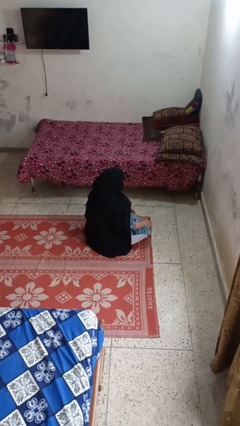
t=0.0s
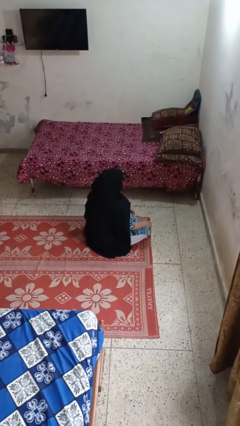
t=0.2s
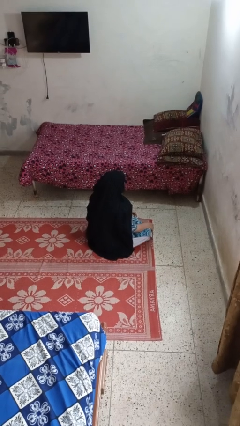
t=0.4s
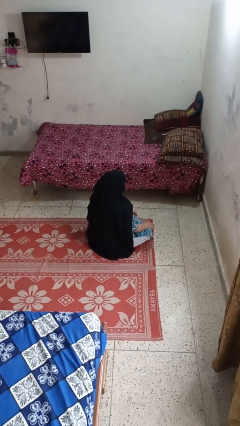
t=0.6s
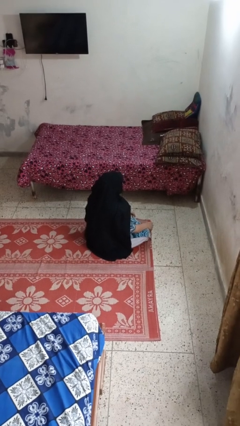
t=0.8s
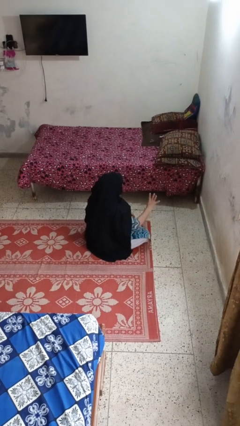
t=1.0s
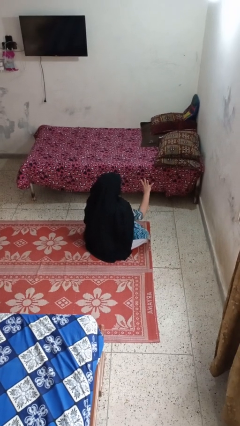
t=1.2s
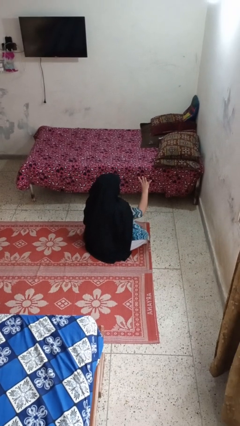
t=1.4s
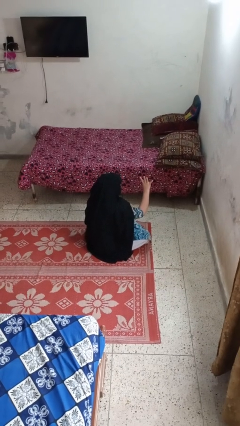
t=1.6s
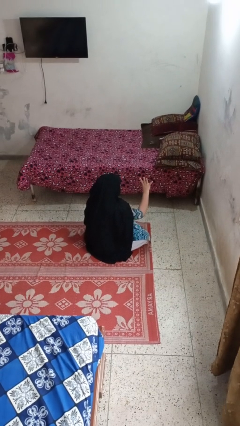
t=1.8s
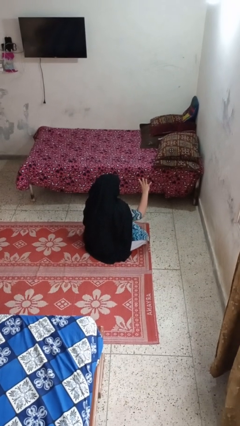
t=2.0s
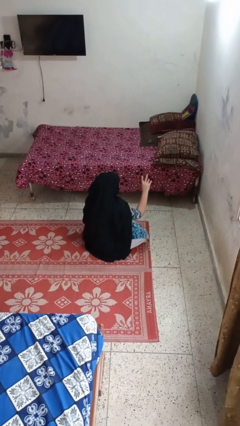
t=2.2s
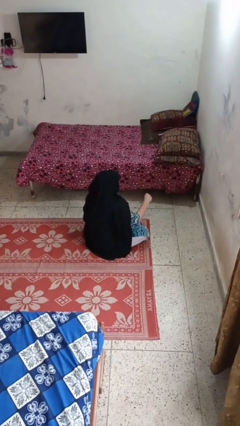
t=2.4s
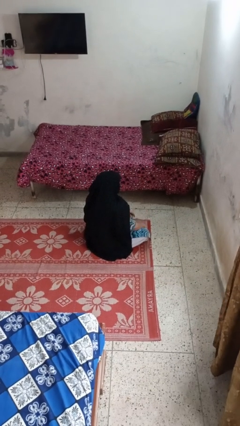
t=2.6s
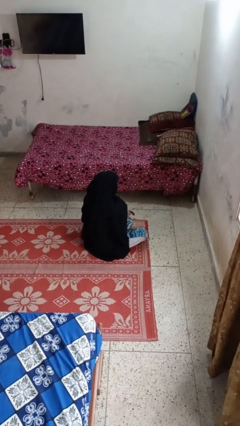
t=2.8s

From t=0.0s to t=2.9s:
person gestures number four

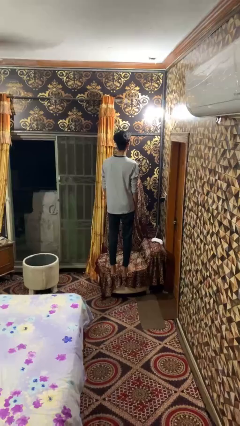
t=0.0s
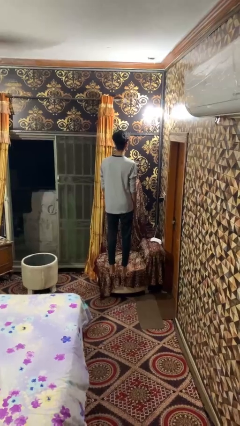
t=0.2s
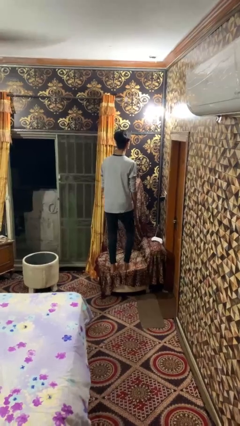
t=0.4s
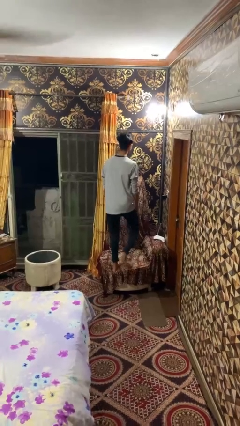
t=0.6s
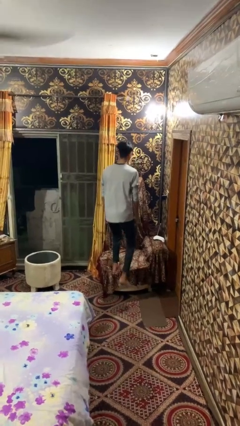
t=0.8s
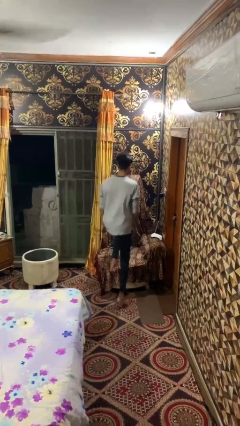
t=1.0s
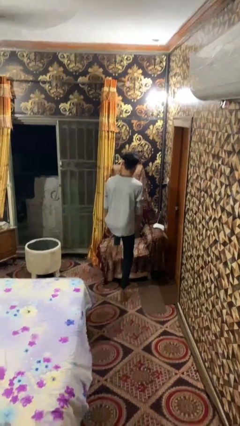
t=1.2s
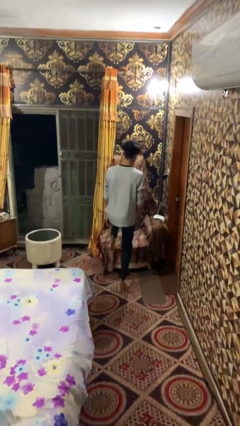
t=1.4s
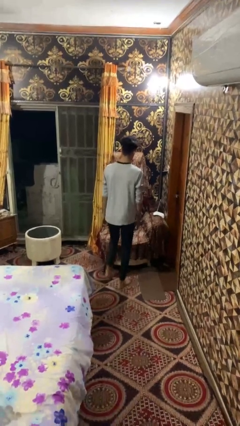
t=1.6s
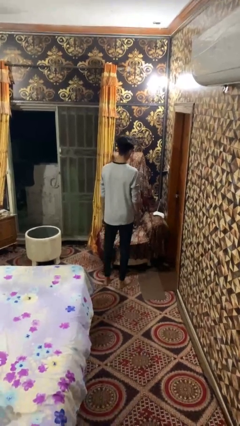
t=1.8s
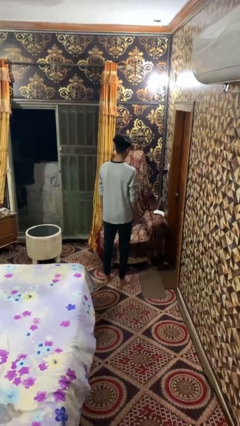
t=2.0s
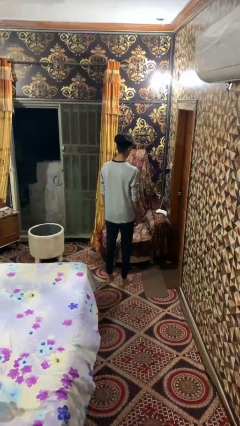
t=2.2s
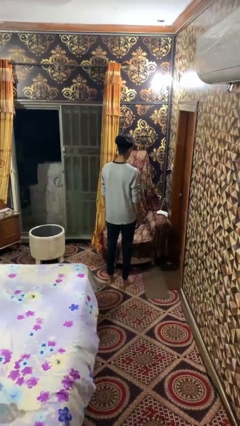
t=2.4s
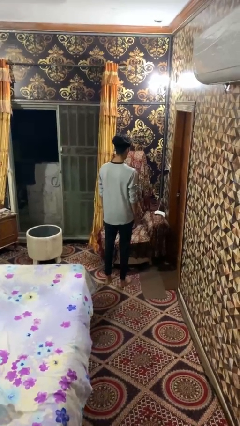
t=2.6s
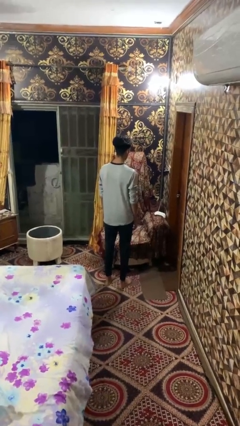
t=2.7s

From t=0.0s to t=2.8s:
person climbs off couch

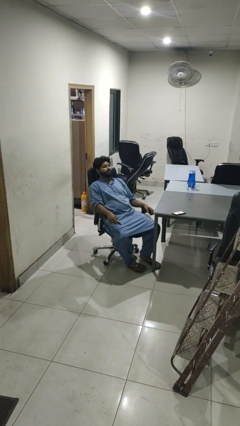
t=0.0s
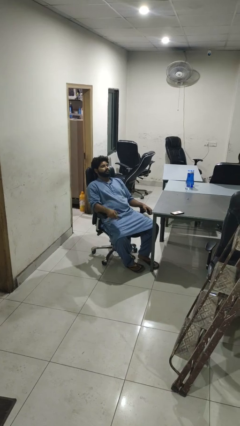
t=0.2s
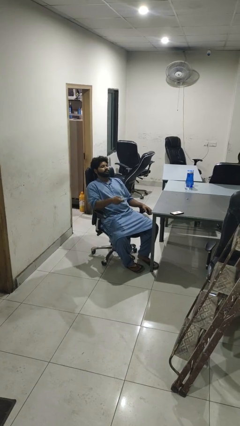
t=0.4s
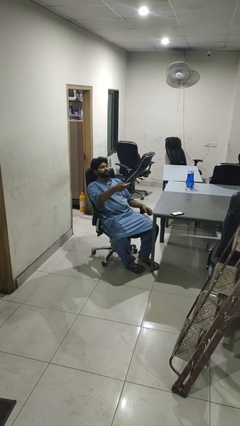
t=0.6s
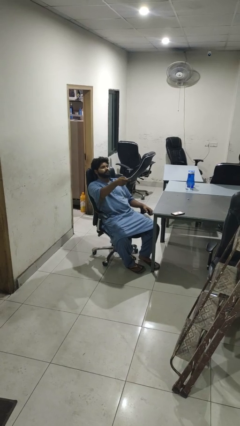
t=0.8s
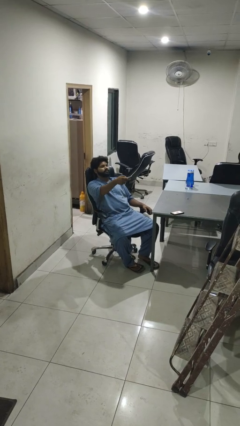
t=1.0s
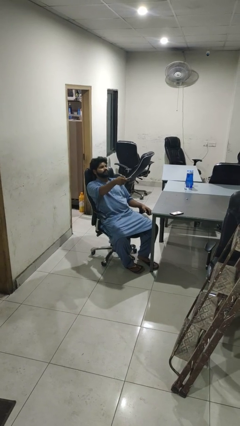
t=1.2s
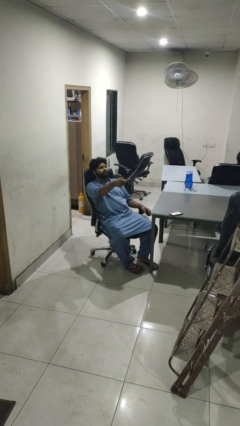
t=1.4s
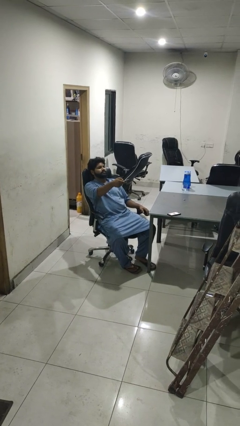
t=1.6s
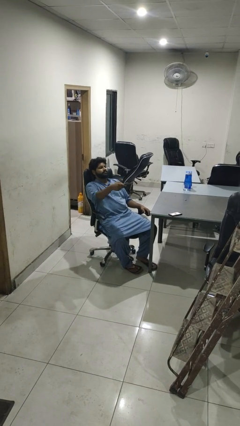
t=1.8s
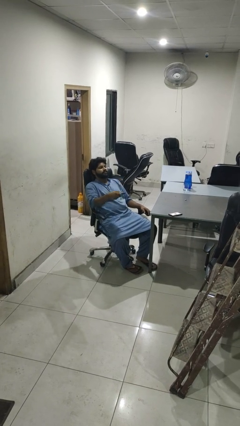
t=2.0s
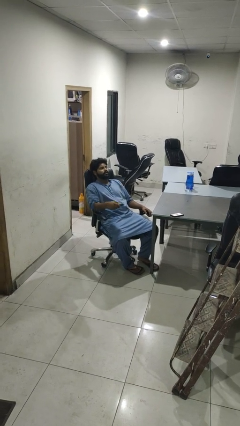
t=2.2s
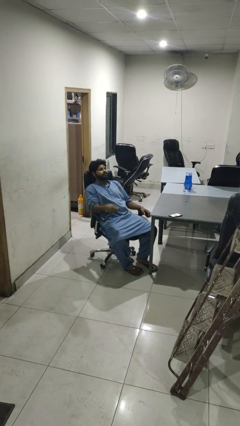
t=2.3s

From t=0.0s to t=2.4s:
person uses television remote

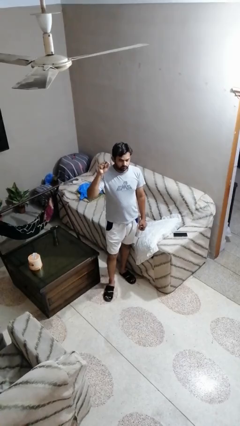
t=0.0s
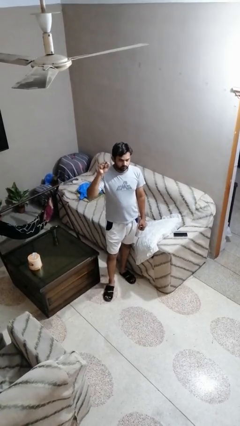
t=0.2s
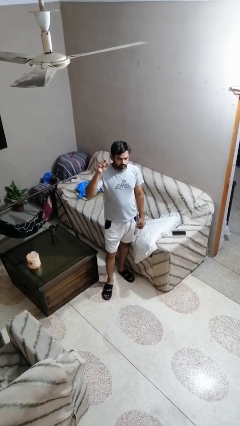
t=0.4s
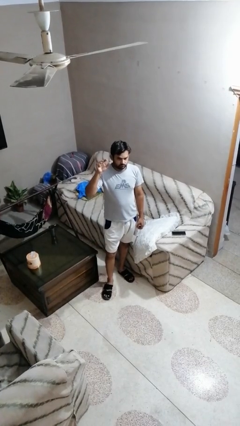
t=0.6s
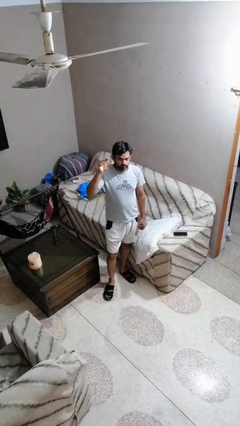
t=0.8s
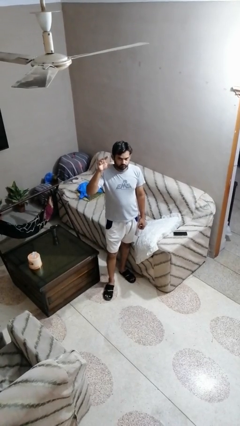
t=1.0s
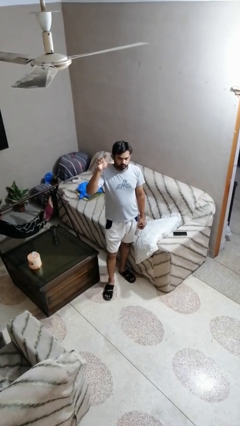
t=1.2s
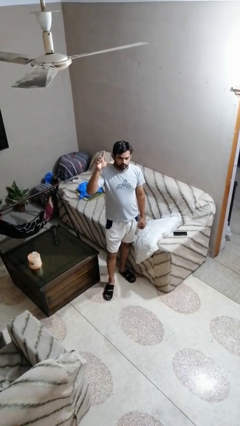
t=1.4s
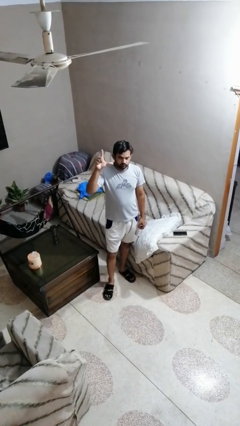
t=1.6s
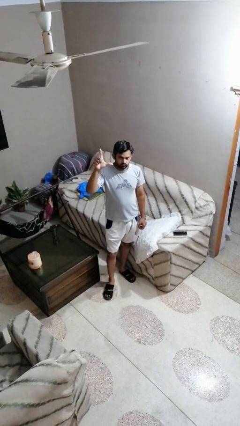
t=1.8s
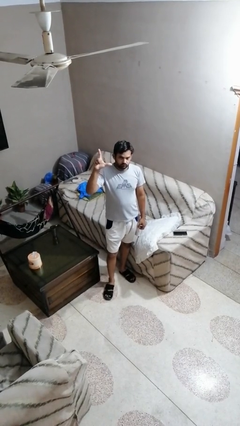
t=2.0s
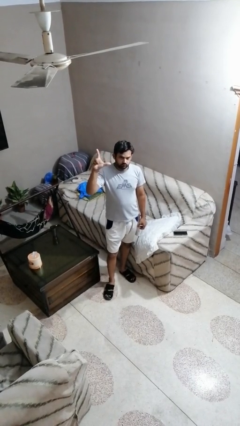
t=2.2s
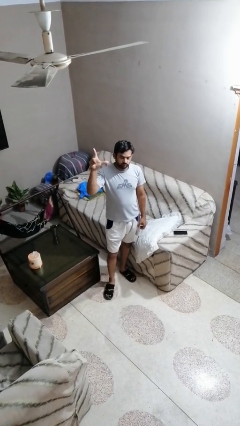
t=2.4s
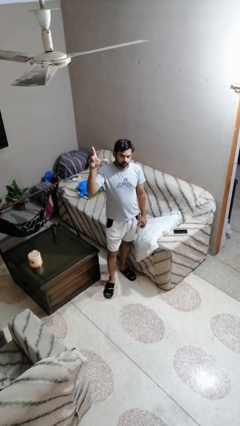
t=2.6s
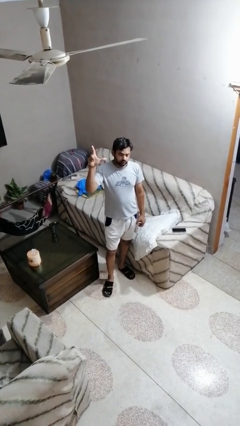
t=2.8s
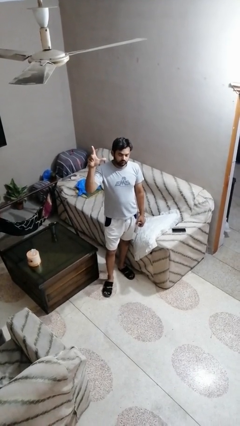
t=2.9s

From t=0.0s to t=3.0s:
person gestures zoom out

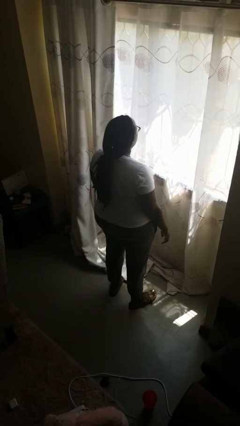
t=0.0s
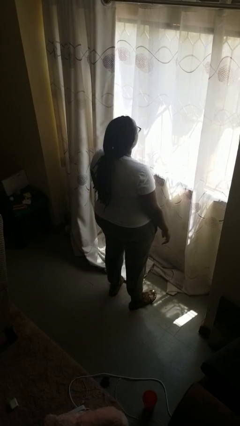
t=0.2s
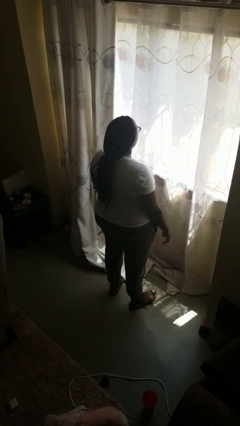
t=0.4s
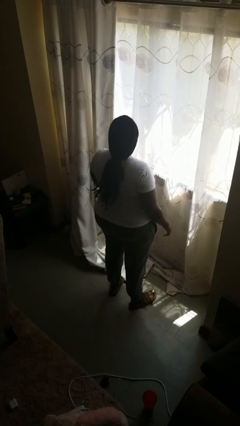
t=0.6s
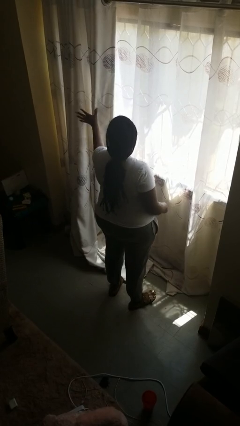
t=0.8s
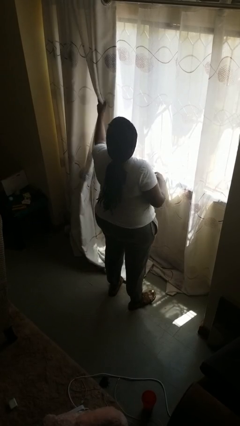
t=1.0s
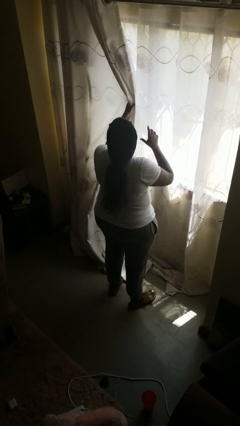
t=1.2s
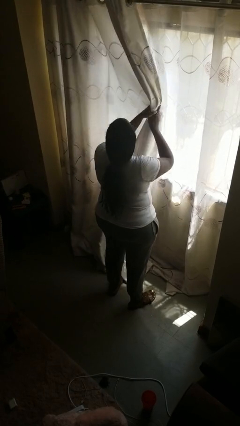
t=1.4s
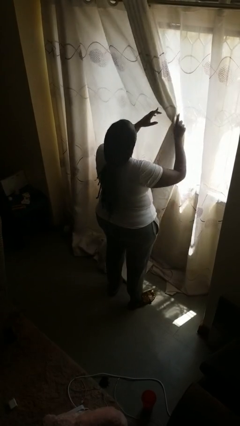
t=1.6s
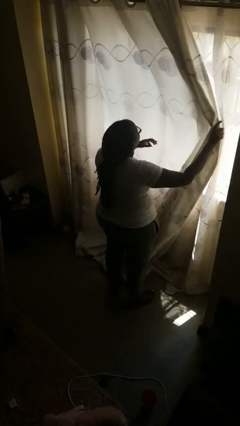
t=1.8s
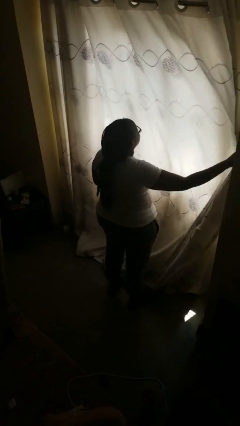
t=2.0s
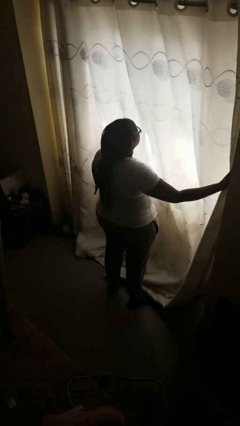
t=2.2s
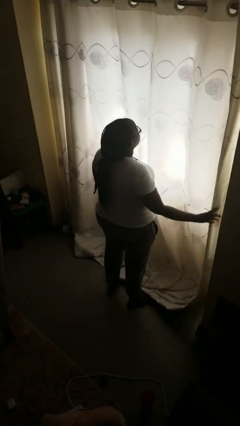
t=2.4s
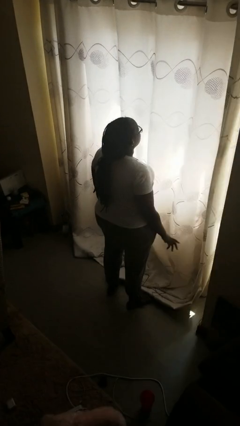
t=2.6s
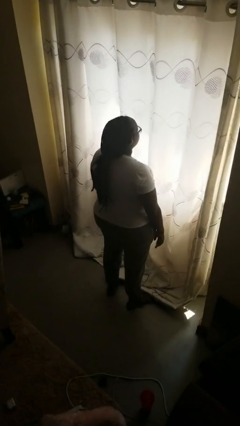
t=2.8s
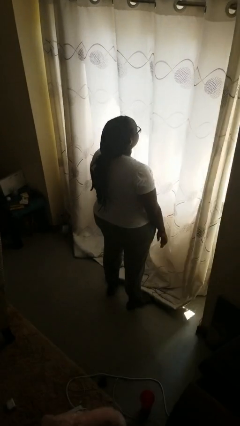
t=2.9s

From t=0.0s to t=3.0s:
person closes curtains

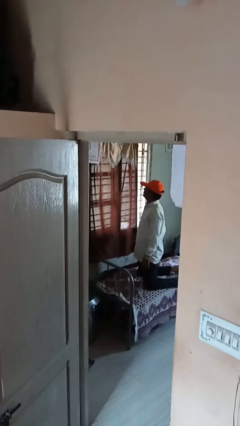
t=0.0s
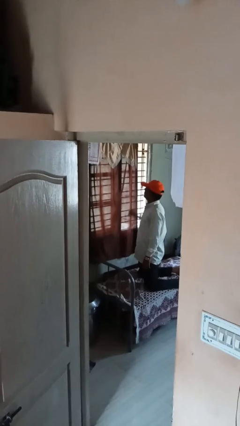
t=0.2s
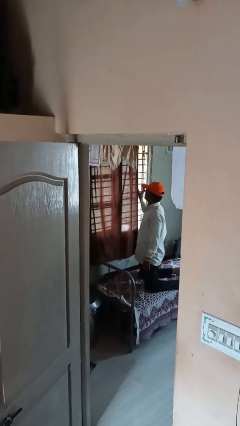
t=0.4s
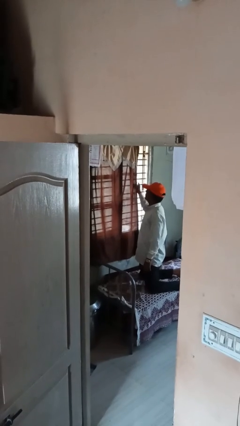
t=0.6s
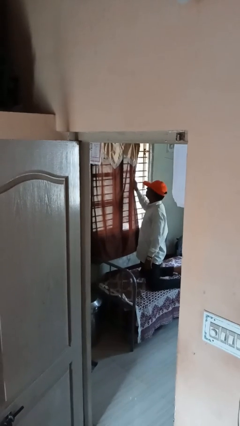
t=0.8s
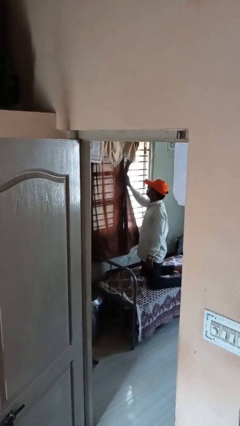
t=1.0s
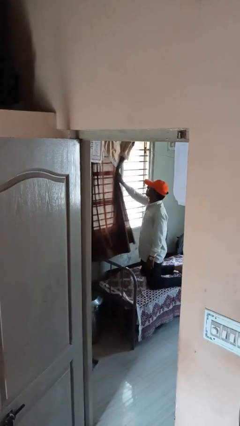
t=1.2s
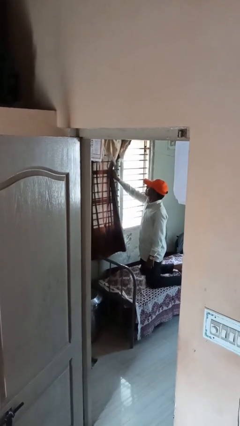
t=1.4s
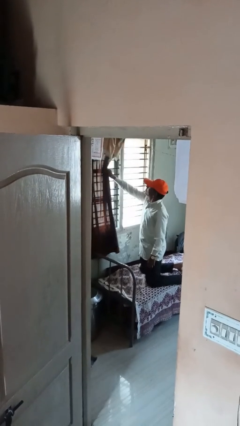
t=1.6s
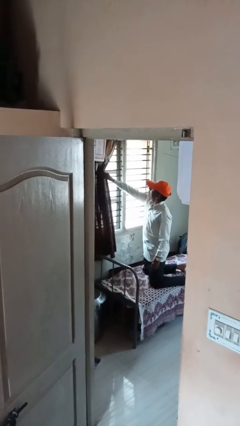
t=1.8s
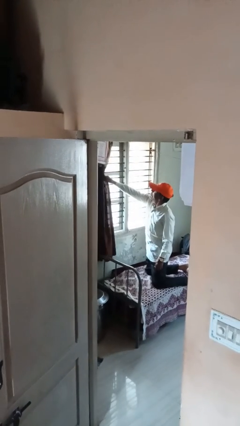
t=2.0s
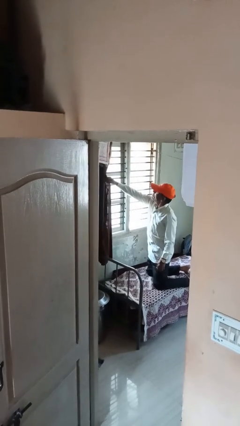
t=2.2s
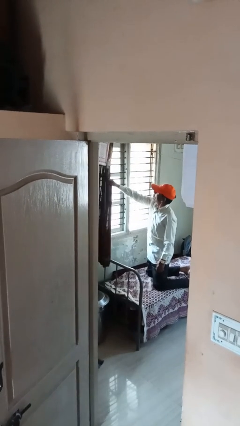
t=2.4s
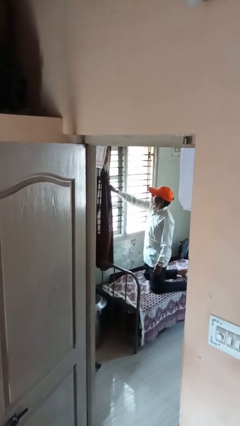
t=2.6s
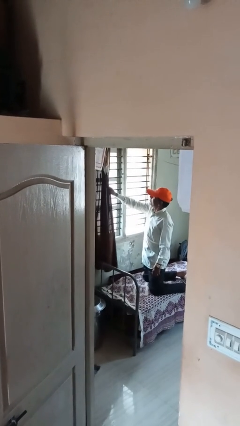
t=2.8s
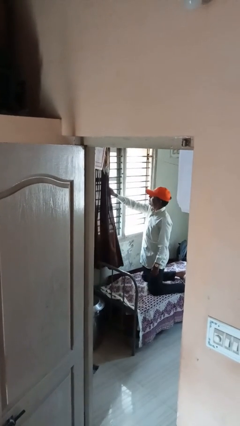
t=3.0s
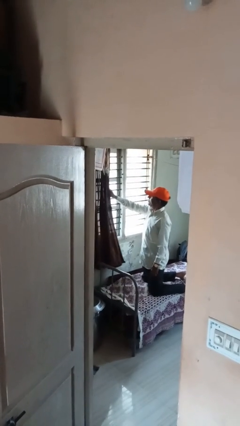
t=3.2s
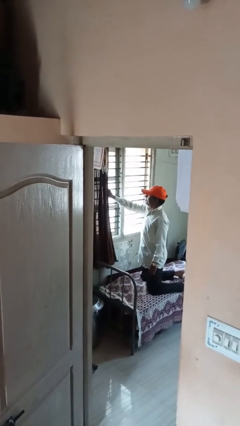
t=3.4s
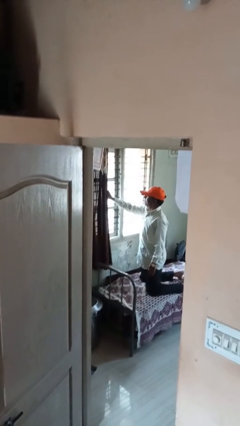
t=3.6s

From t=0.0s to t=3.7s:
person opens curtains
